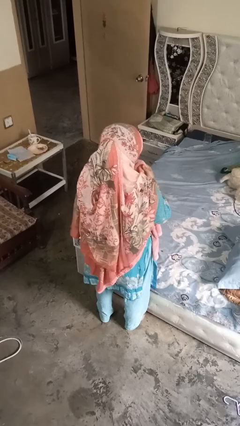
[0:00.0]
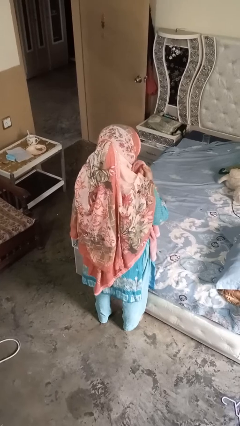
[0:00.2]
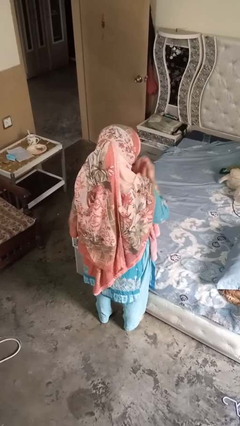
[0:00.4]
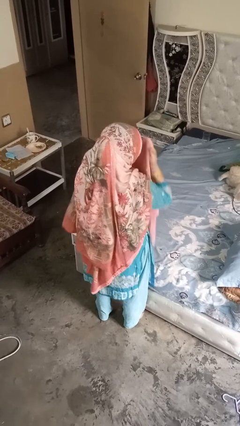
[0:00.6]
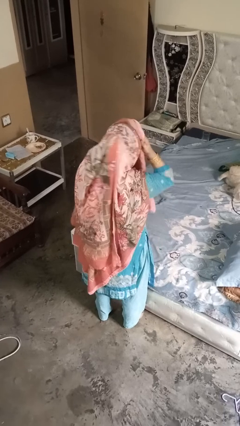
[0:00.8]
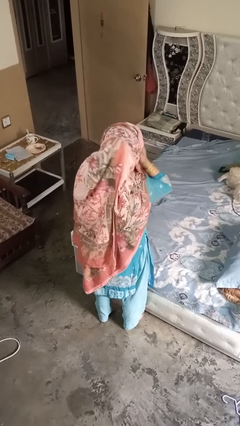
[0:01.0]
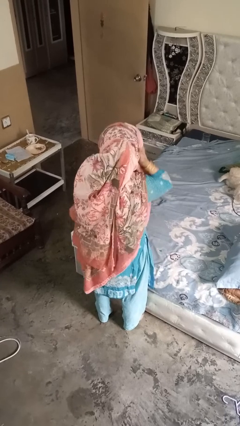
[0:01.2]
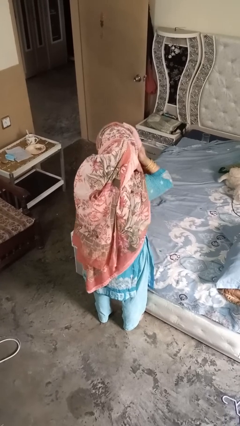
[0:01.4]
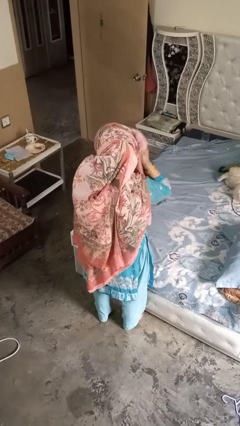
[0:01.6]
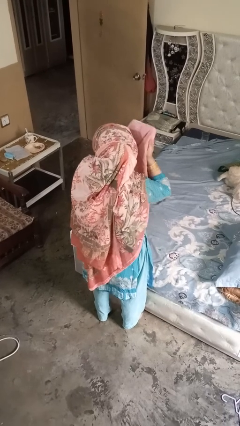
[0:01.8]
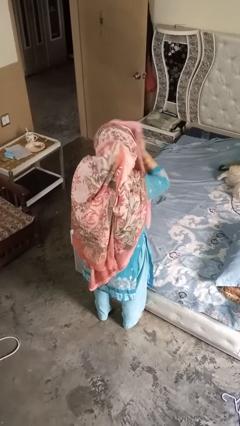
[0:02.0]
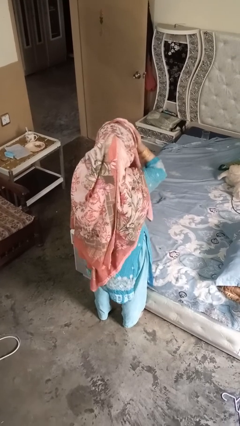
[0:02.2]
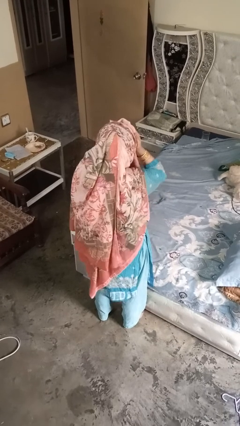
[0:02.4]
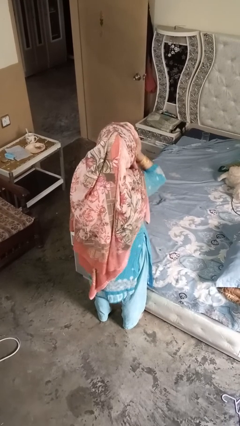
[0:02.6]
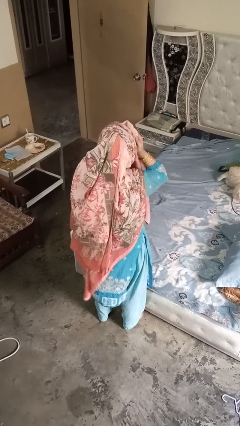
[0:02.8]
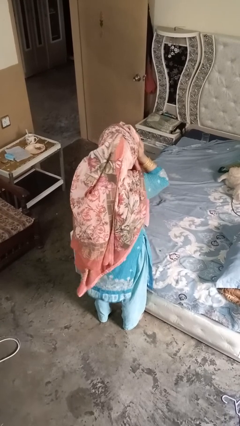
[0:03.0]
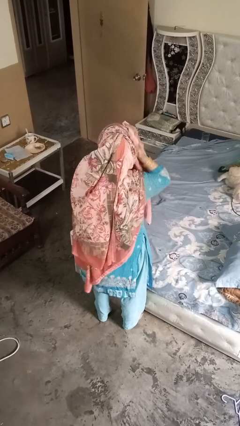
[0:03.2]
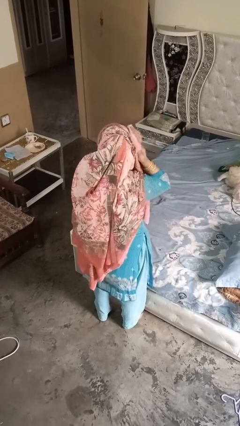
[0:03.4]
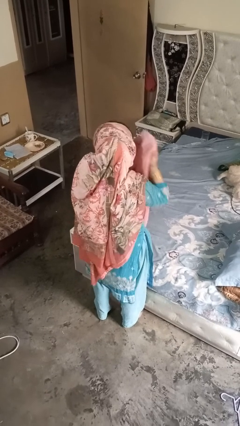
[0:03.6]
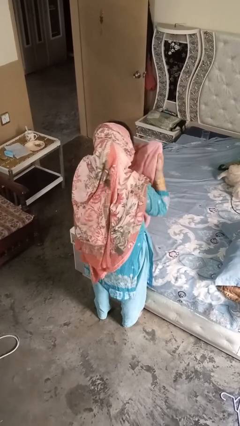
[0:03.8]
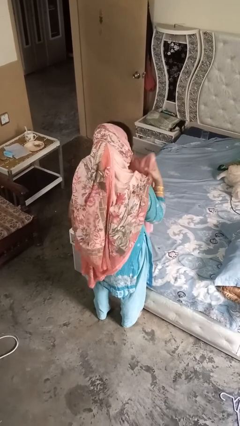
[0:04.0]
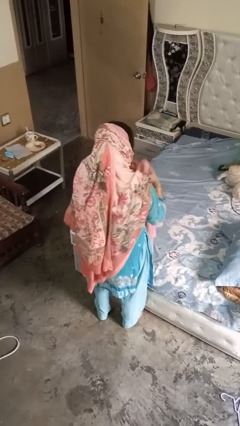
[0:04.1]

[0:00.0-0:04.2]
person dries hair with hairdryer

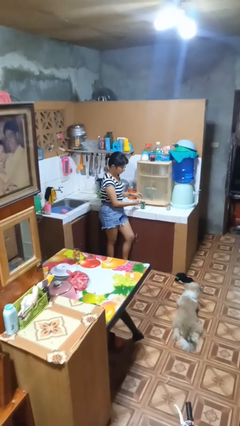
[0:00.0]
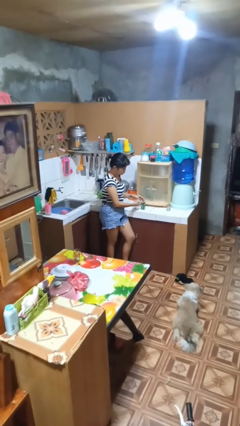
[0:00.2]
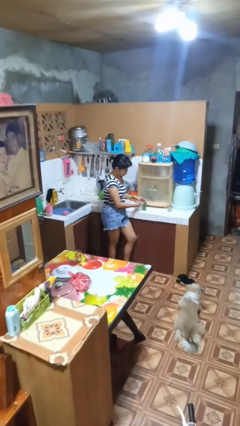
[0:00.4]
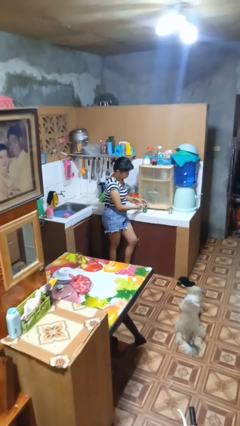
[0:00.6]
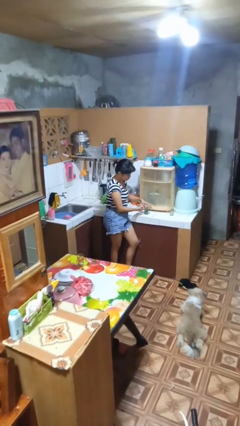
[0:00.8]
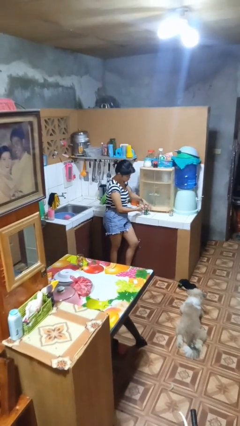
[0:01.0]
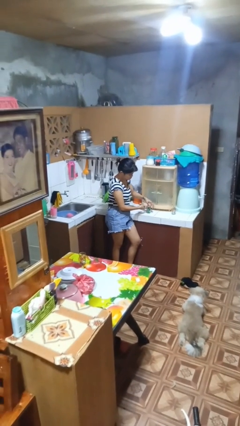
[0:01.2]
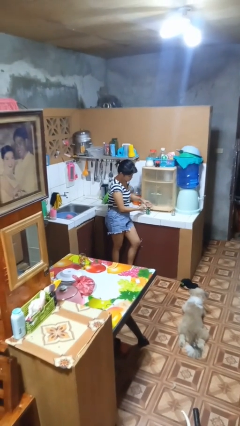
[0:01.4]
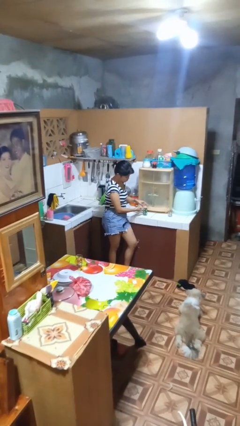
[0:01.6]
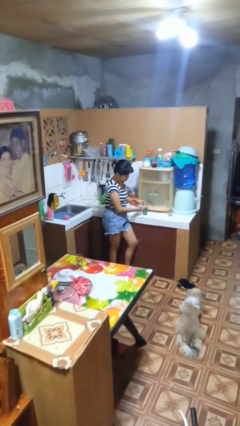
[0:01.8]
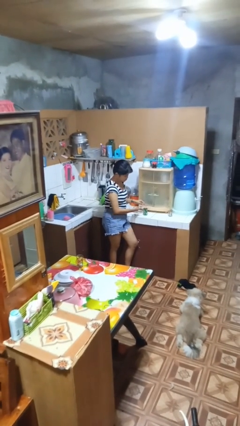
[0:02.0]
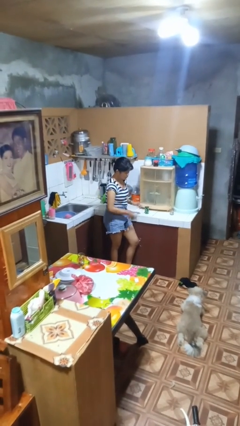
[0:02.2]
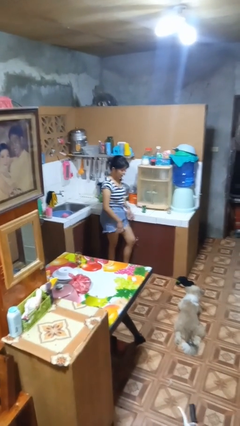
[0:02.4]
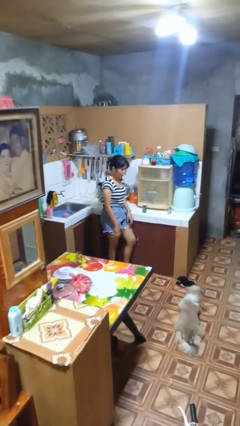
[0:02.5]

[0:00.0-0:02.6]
person opens can with can opener

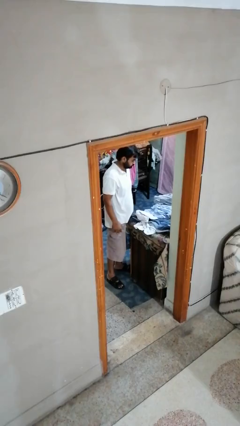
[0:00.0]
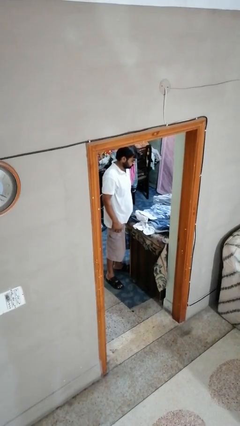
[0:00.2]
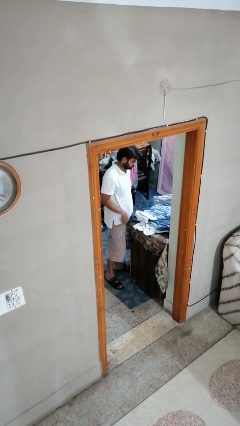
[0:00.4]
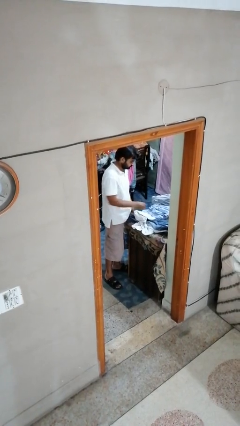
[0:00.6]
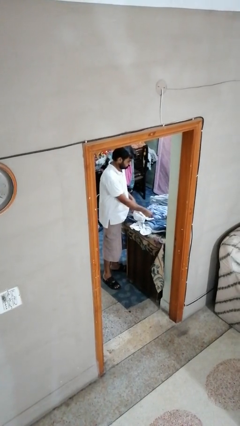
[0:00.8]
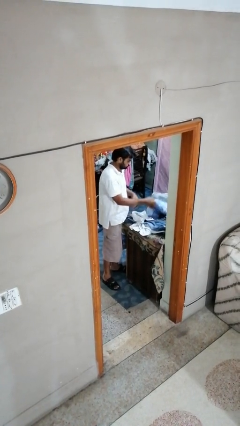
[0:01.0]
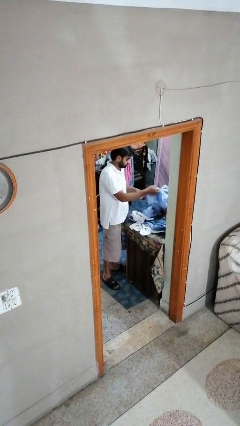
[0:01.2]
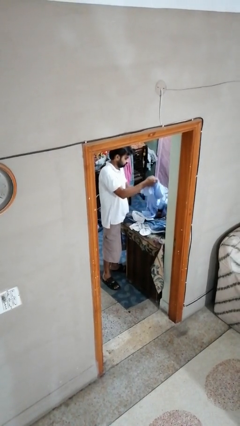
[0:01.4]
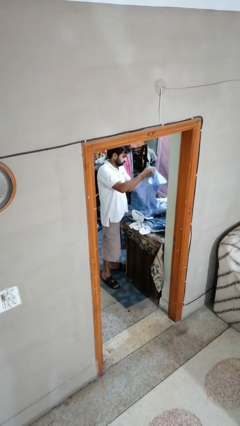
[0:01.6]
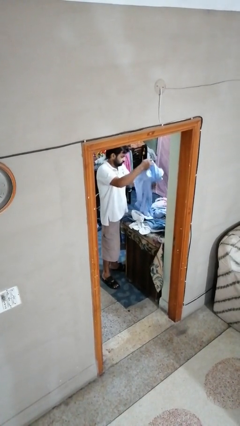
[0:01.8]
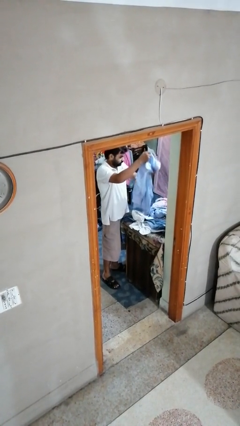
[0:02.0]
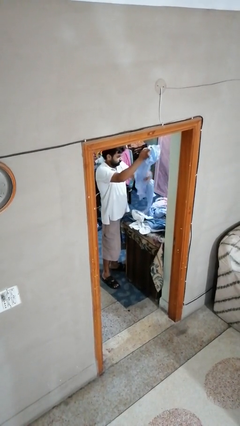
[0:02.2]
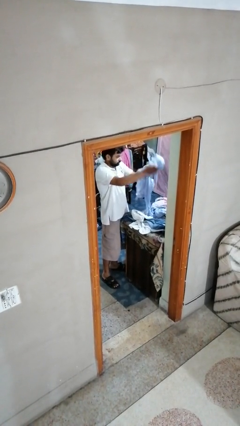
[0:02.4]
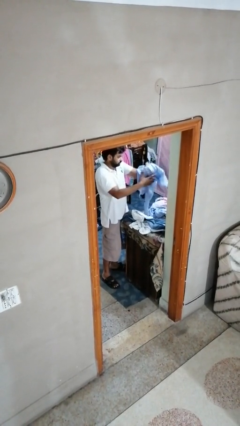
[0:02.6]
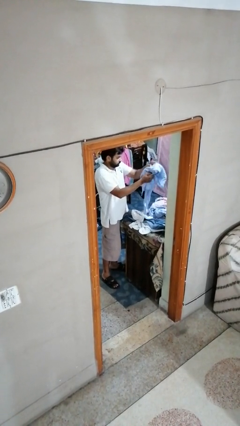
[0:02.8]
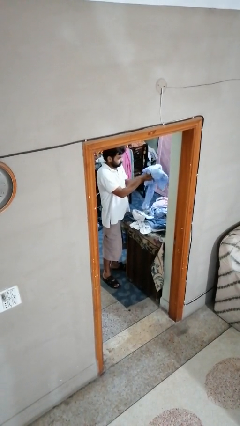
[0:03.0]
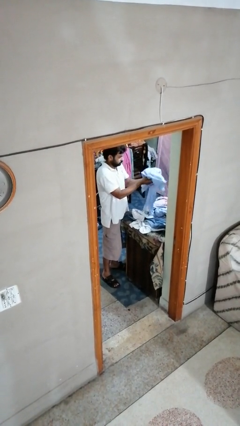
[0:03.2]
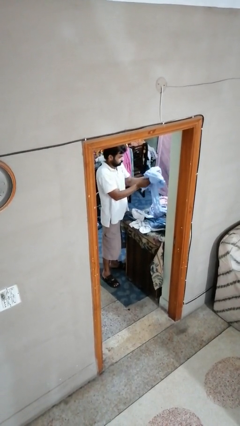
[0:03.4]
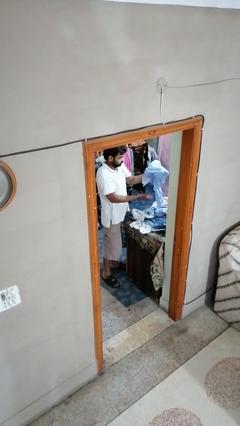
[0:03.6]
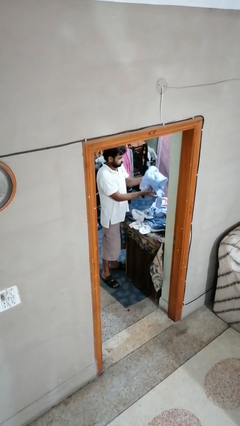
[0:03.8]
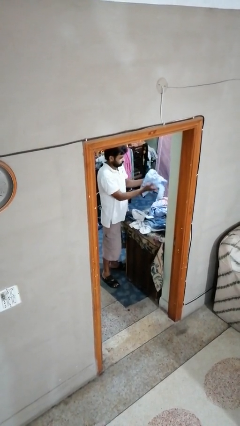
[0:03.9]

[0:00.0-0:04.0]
person folds shirt

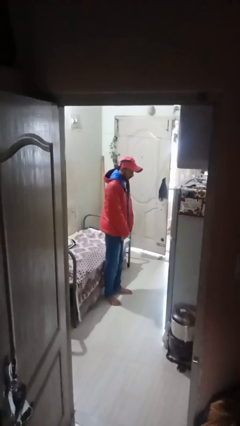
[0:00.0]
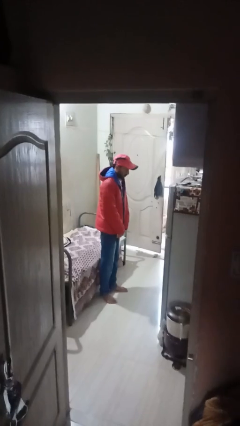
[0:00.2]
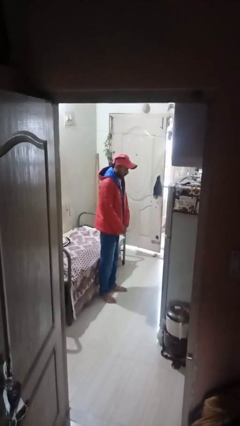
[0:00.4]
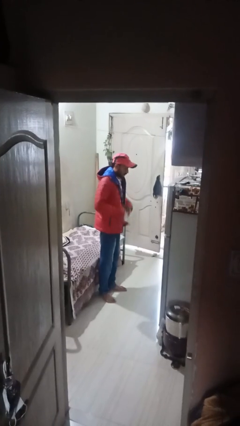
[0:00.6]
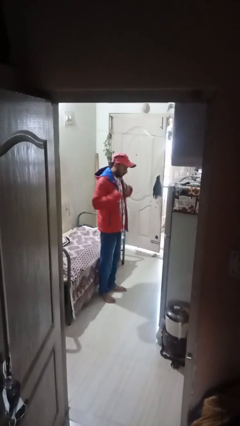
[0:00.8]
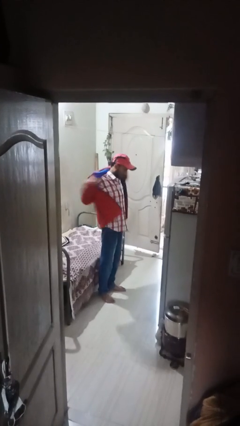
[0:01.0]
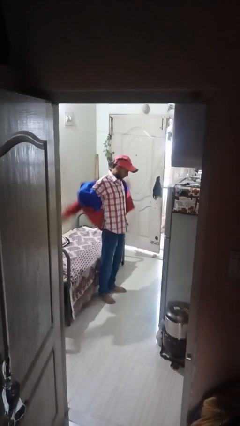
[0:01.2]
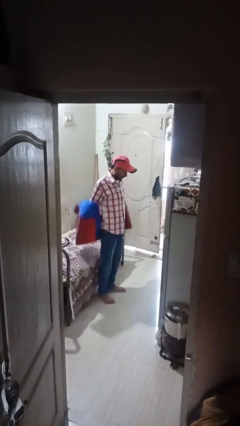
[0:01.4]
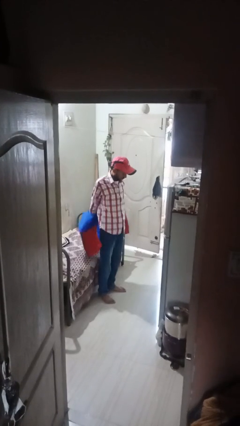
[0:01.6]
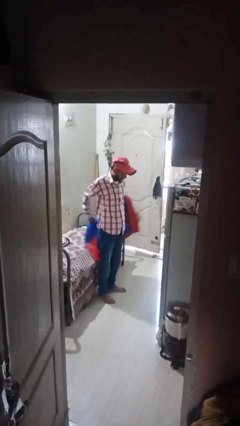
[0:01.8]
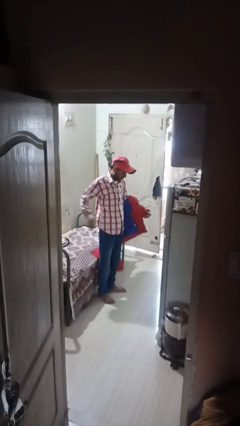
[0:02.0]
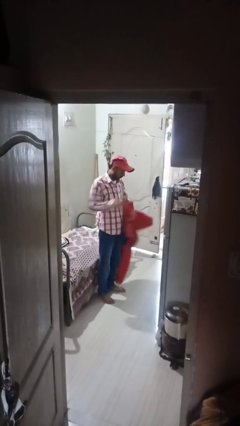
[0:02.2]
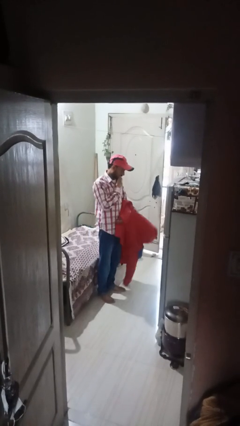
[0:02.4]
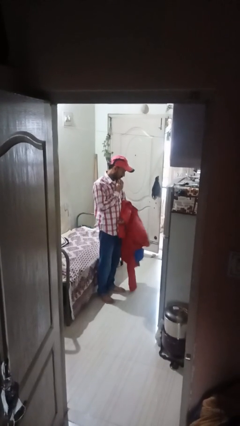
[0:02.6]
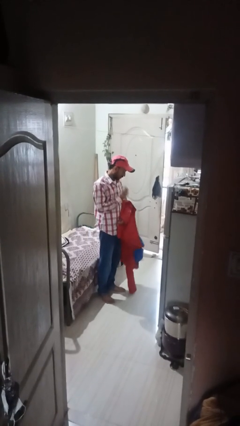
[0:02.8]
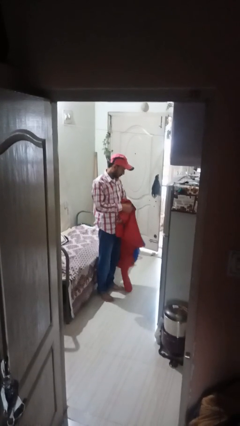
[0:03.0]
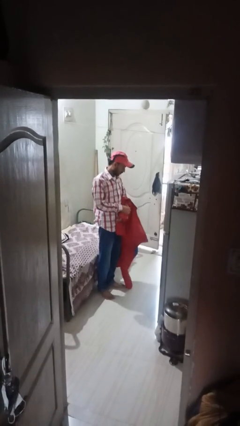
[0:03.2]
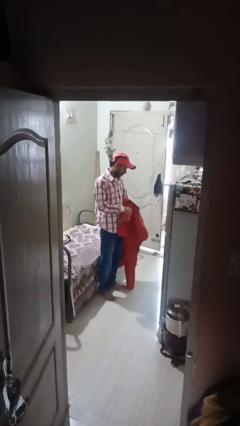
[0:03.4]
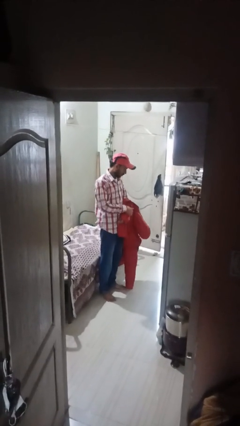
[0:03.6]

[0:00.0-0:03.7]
person takes off jacket

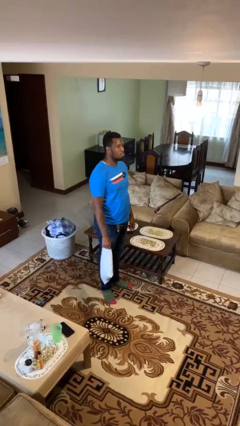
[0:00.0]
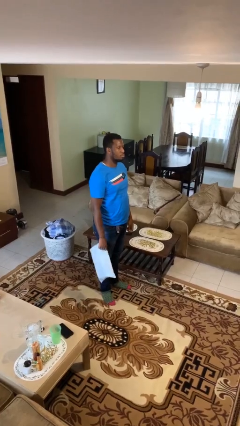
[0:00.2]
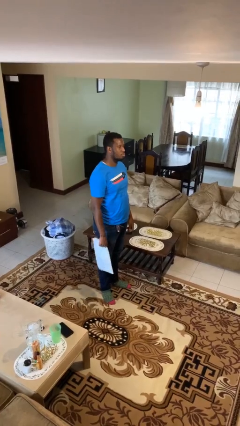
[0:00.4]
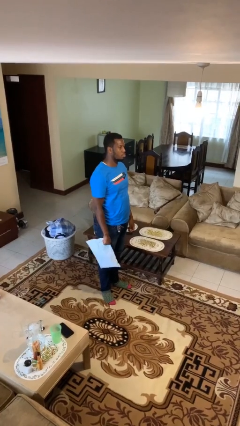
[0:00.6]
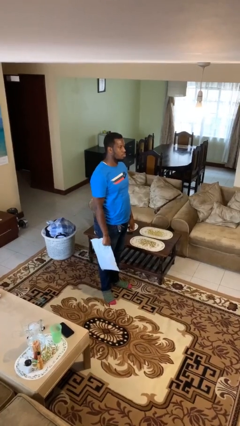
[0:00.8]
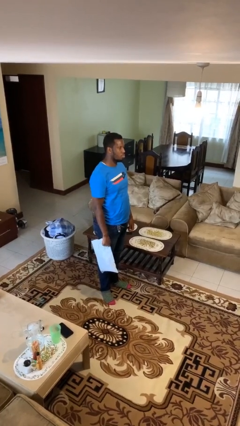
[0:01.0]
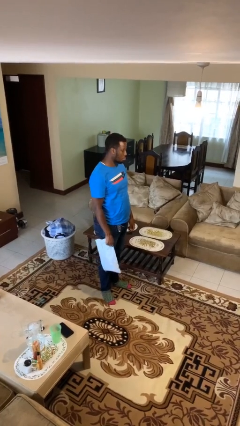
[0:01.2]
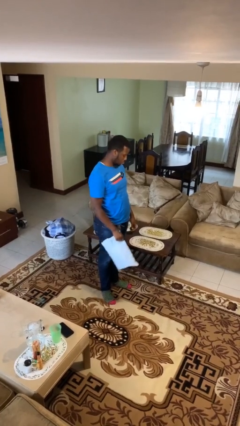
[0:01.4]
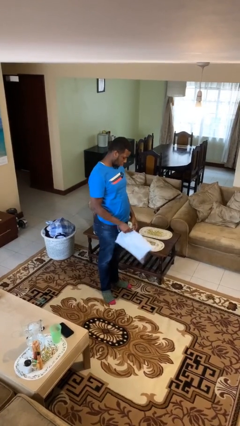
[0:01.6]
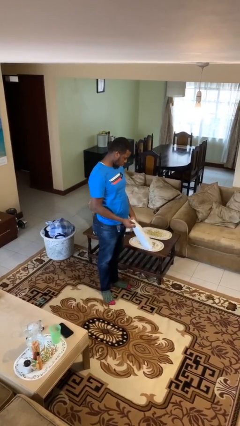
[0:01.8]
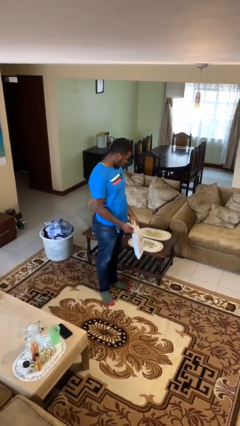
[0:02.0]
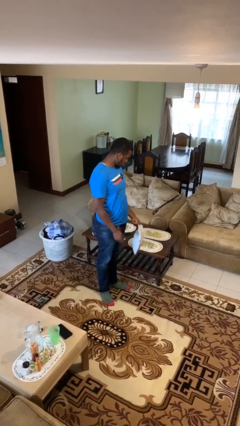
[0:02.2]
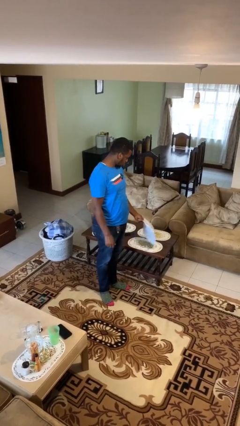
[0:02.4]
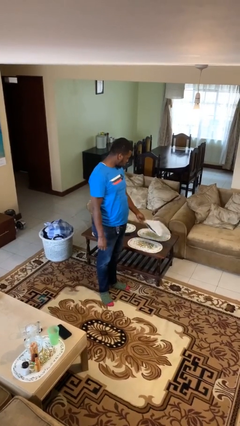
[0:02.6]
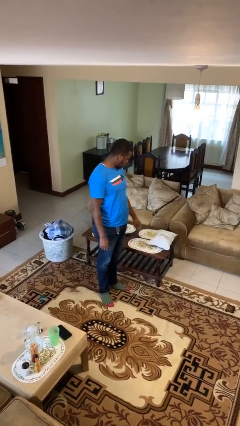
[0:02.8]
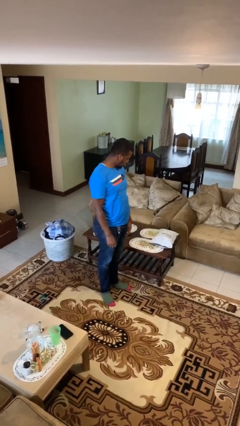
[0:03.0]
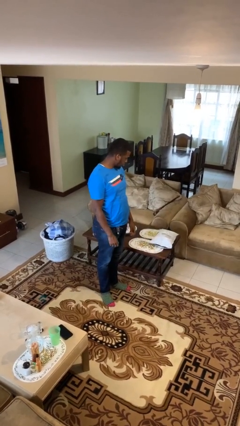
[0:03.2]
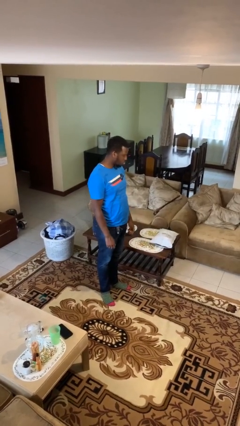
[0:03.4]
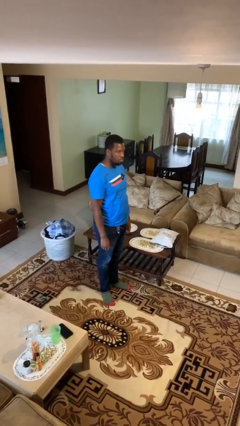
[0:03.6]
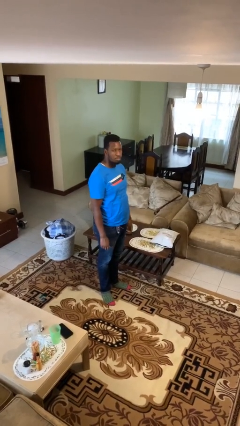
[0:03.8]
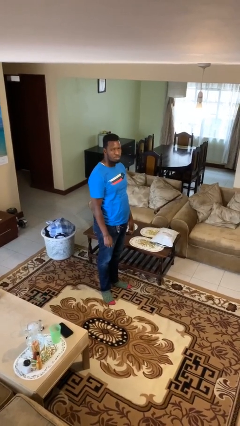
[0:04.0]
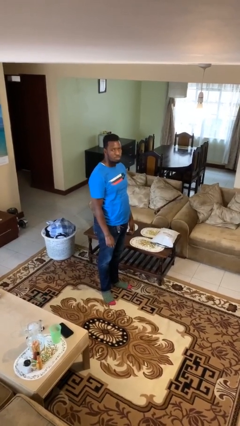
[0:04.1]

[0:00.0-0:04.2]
person puts down object on table
